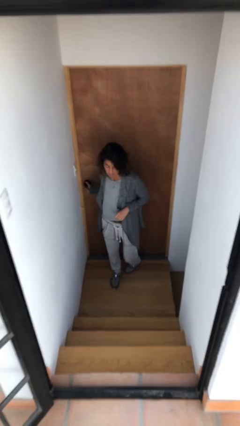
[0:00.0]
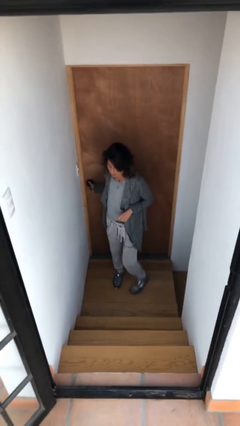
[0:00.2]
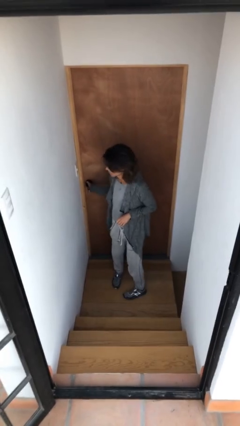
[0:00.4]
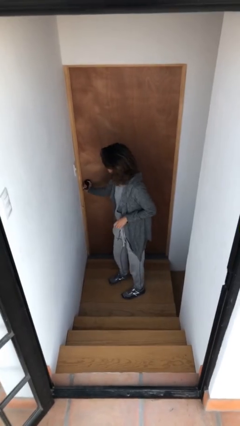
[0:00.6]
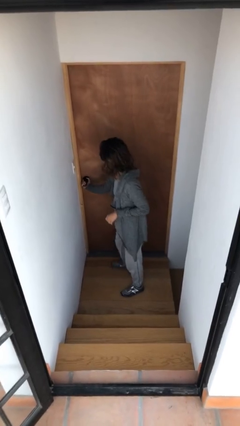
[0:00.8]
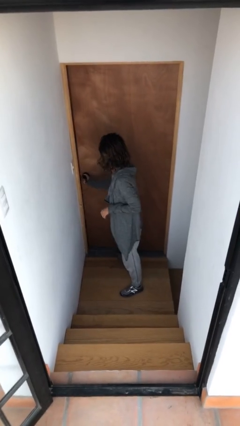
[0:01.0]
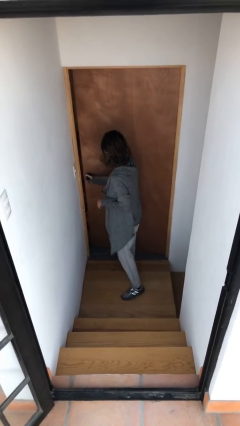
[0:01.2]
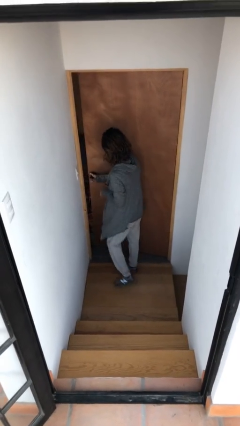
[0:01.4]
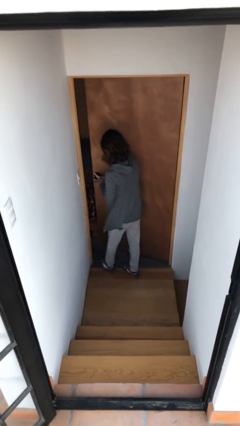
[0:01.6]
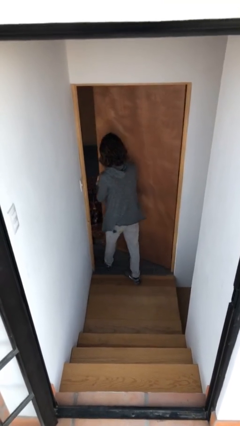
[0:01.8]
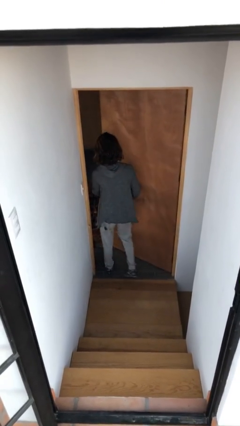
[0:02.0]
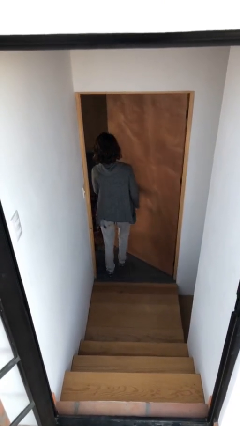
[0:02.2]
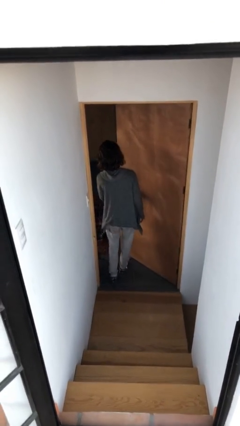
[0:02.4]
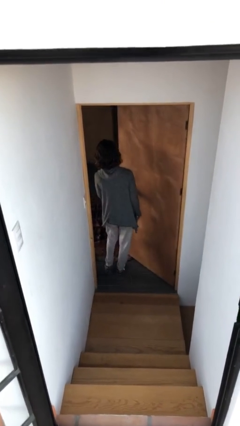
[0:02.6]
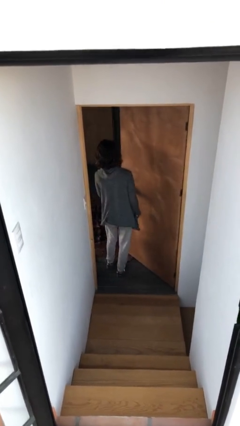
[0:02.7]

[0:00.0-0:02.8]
person opens facility door

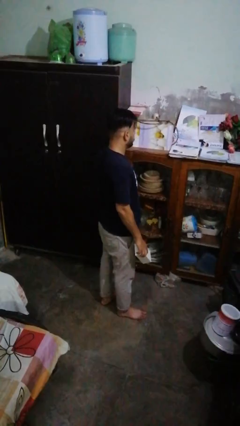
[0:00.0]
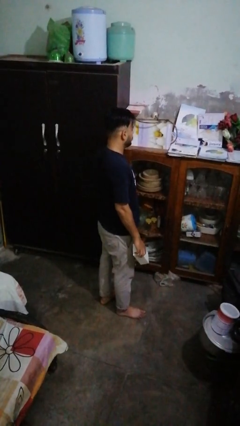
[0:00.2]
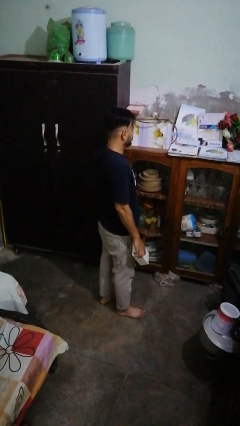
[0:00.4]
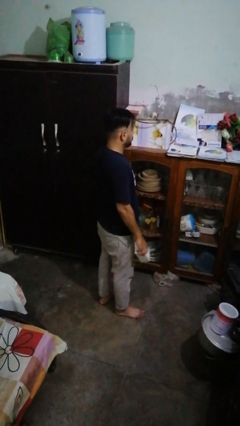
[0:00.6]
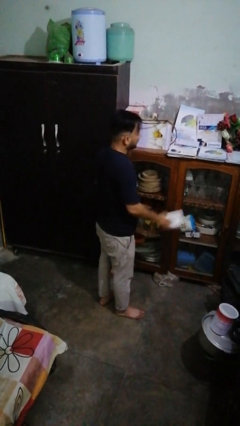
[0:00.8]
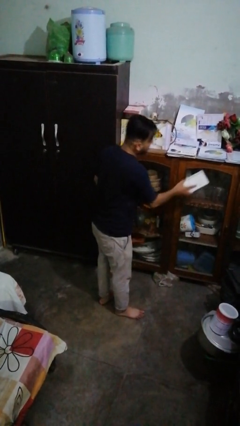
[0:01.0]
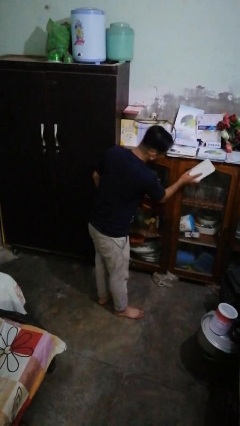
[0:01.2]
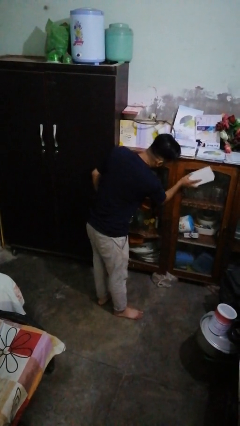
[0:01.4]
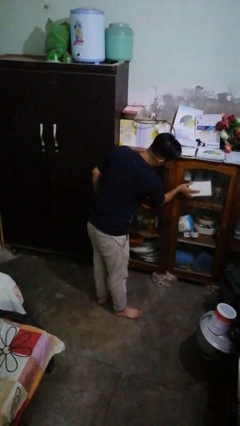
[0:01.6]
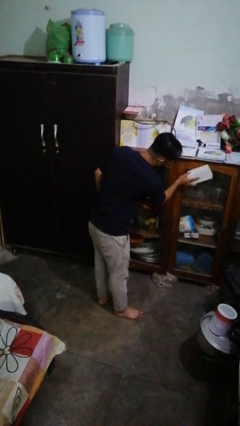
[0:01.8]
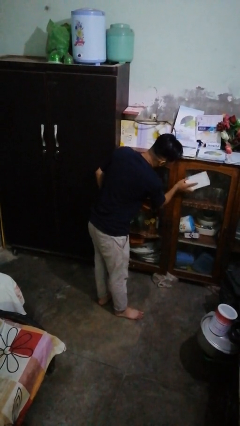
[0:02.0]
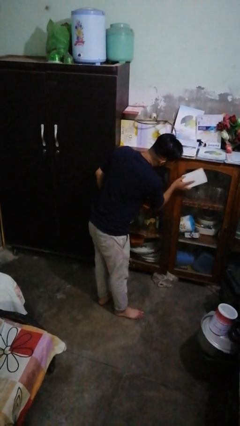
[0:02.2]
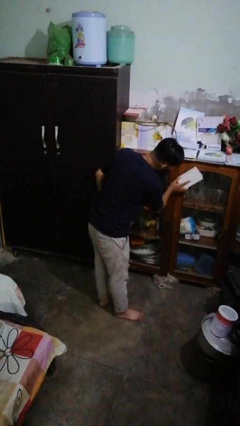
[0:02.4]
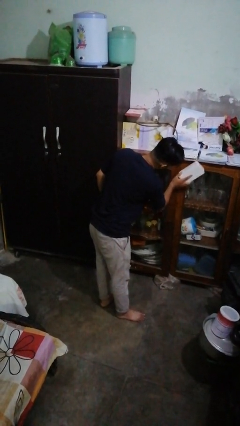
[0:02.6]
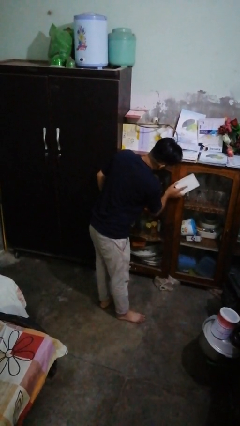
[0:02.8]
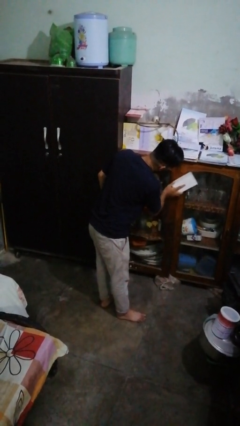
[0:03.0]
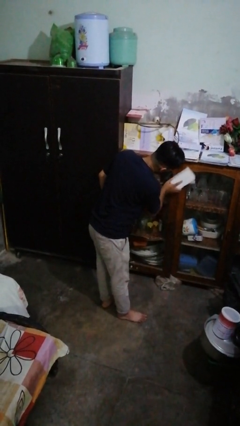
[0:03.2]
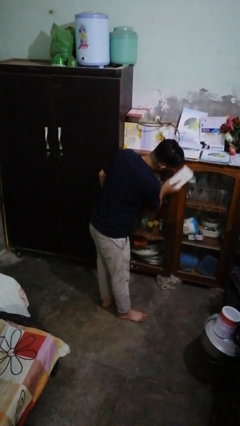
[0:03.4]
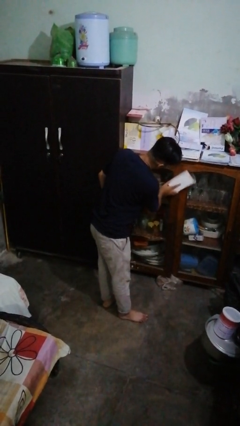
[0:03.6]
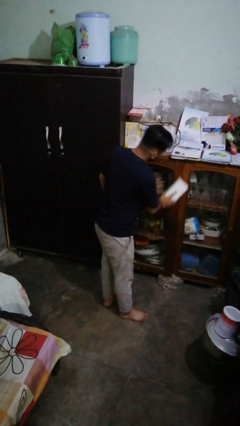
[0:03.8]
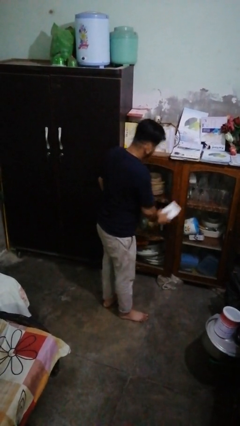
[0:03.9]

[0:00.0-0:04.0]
person dusts furniture

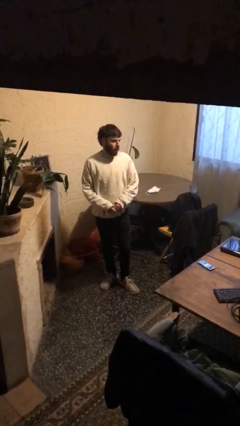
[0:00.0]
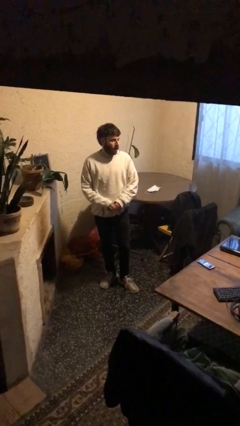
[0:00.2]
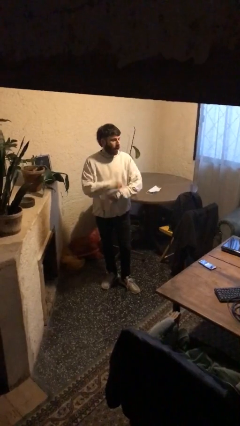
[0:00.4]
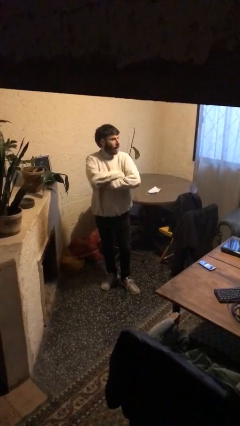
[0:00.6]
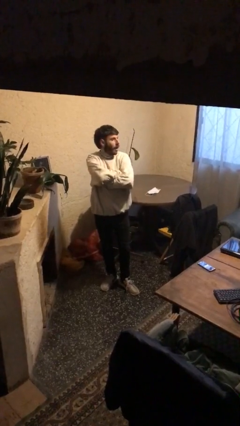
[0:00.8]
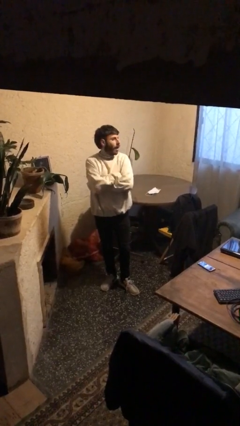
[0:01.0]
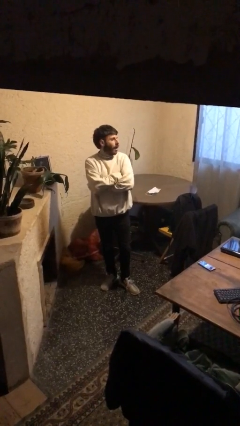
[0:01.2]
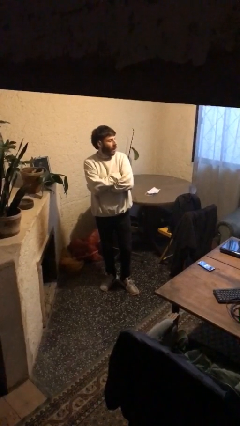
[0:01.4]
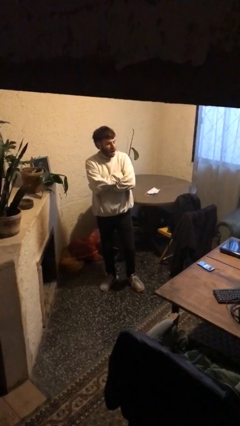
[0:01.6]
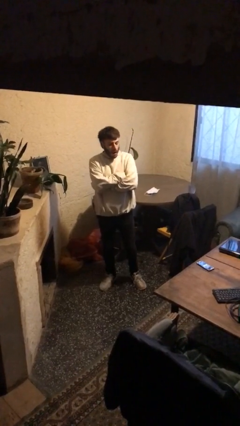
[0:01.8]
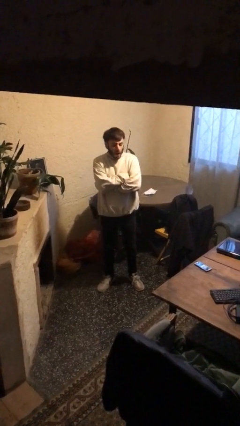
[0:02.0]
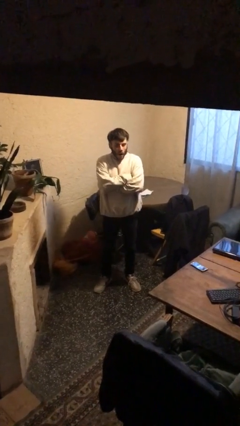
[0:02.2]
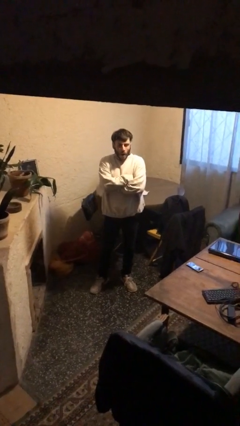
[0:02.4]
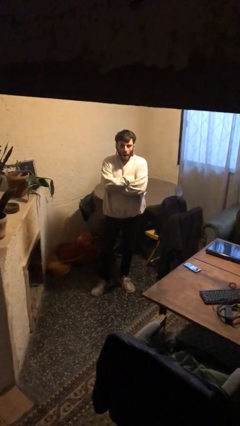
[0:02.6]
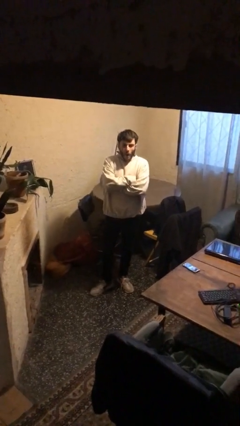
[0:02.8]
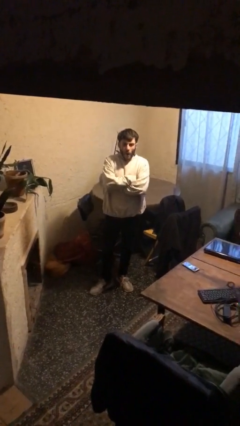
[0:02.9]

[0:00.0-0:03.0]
person crosses arms

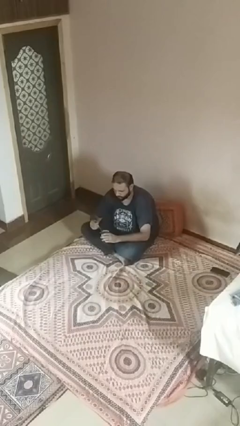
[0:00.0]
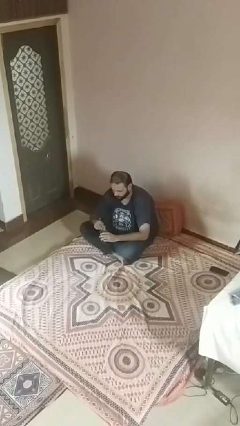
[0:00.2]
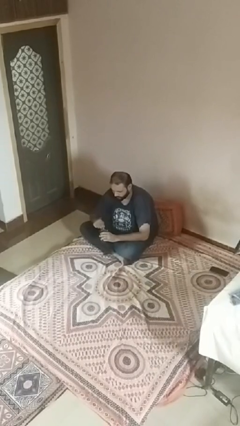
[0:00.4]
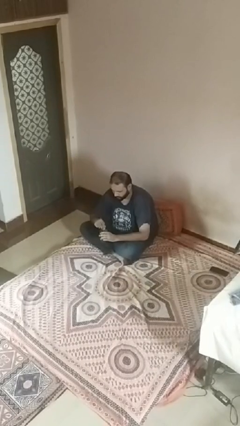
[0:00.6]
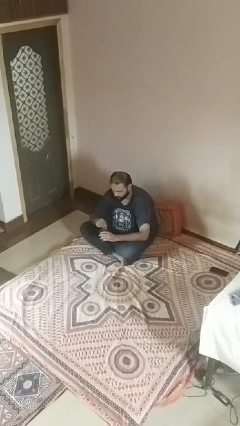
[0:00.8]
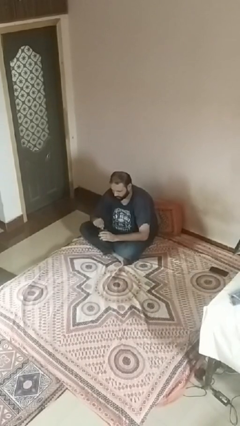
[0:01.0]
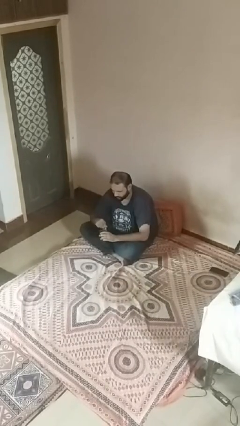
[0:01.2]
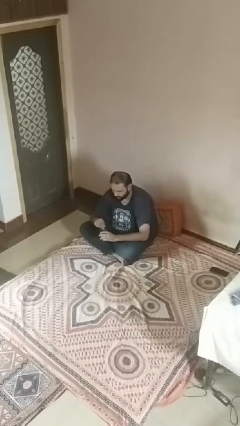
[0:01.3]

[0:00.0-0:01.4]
person stirs mug

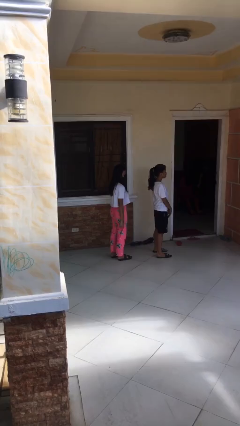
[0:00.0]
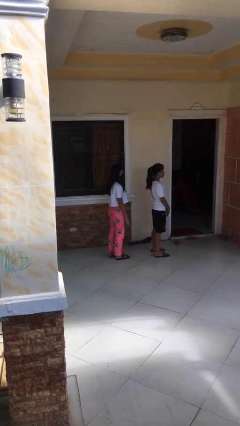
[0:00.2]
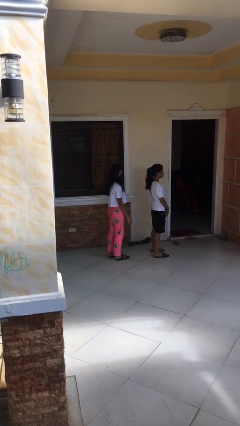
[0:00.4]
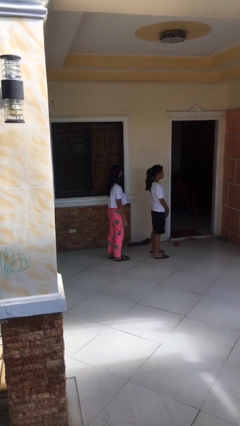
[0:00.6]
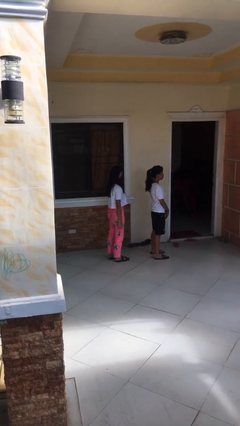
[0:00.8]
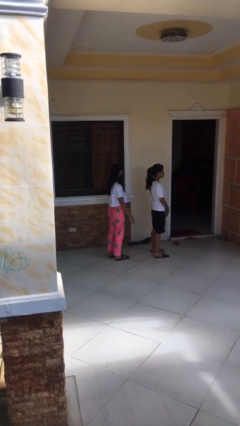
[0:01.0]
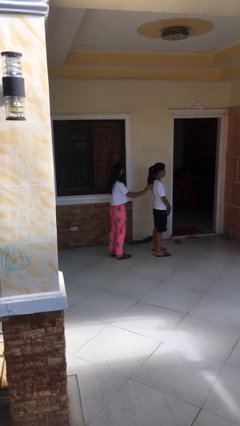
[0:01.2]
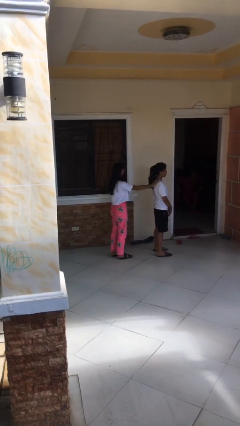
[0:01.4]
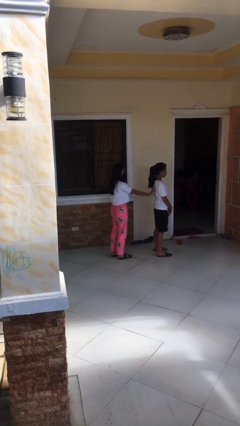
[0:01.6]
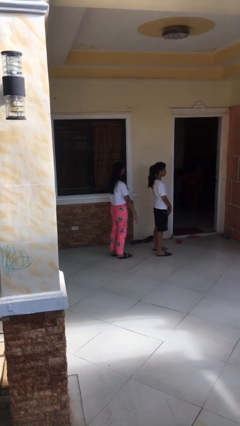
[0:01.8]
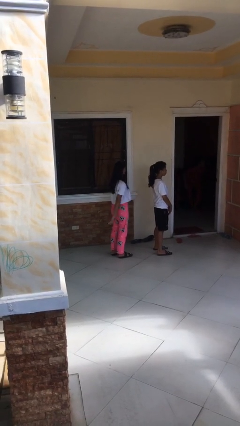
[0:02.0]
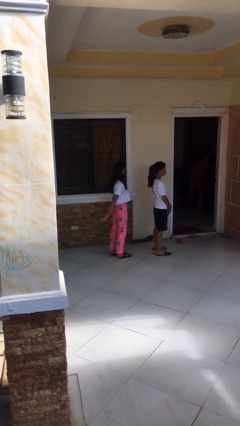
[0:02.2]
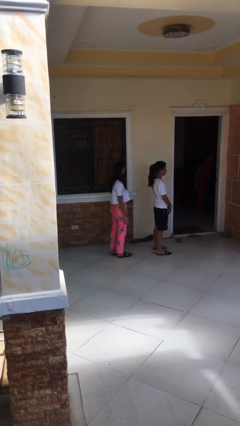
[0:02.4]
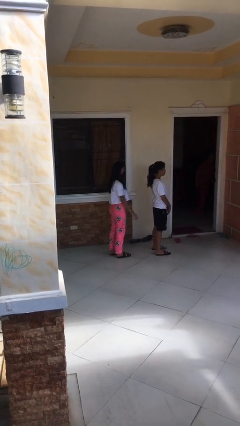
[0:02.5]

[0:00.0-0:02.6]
person touches back of person

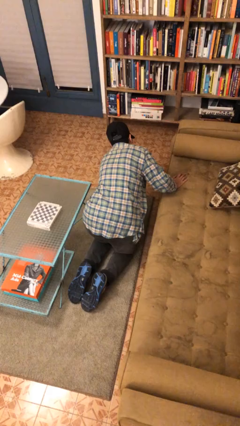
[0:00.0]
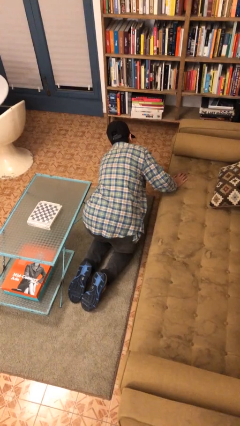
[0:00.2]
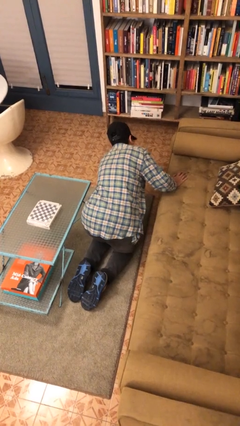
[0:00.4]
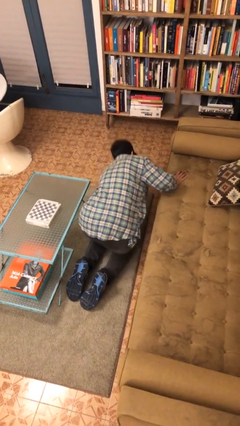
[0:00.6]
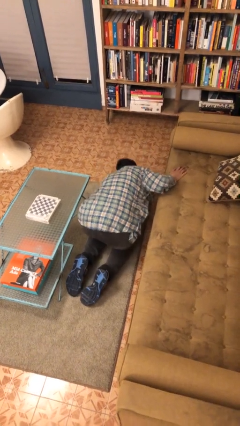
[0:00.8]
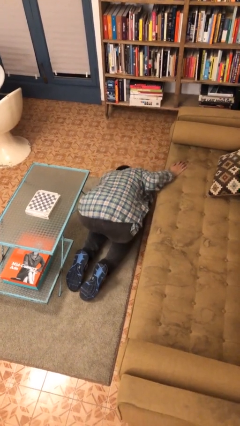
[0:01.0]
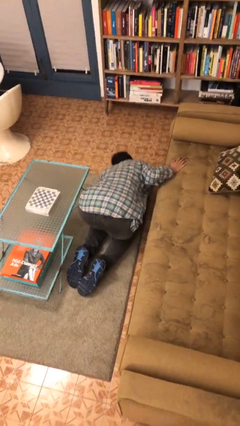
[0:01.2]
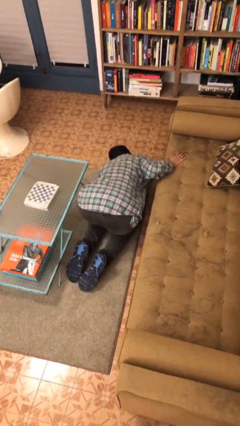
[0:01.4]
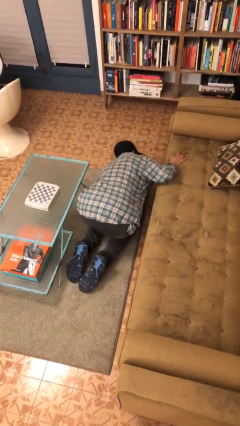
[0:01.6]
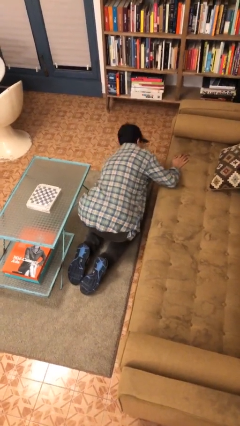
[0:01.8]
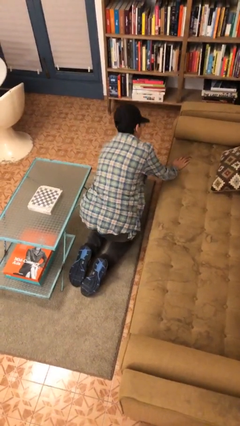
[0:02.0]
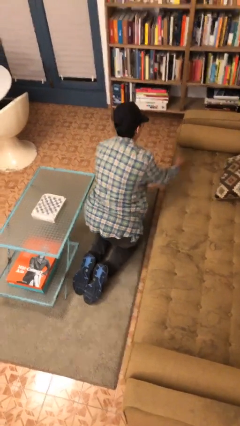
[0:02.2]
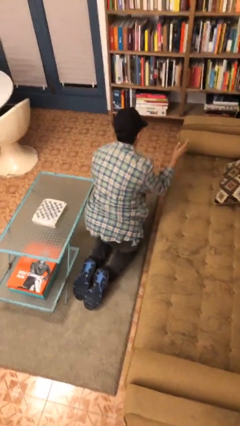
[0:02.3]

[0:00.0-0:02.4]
person searches under couch

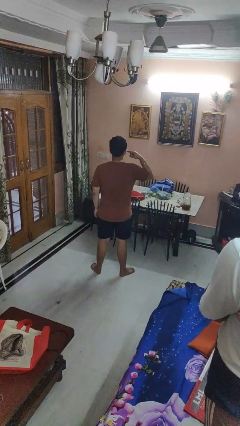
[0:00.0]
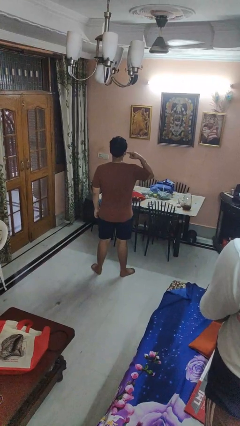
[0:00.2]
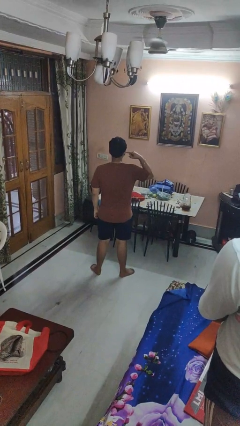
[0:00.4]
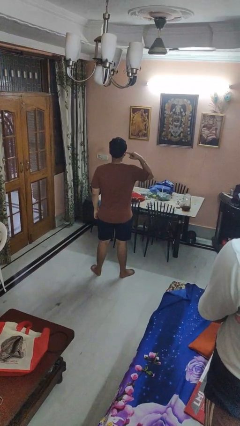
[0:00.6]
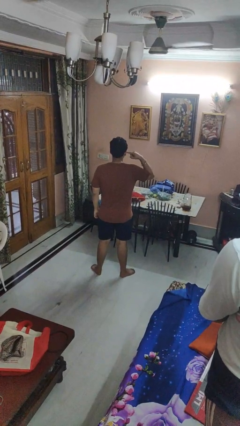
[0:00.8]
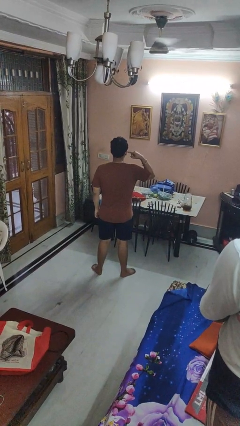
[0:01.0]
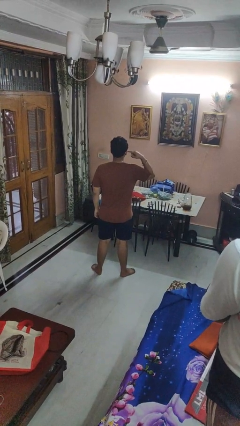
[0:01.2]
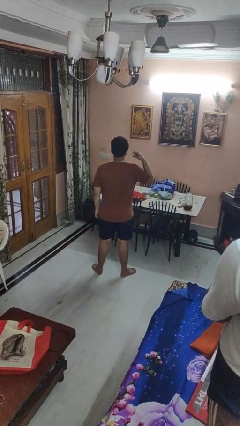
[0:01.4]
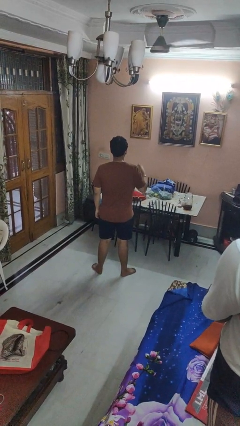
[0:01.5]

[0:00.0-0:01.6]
person gestures listen closely
